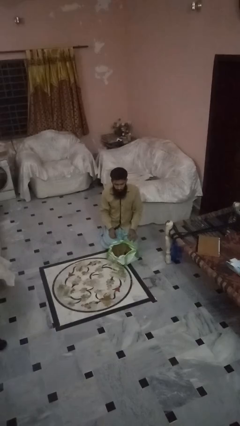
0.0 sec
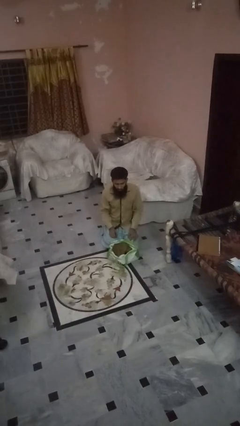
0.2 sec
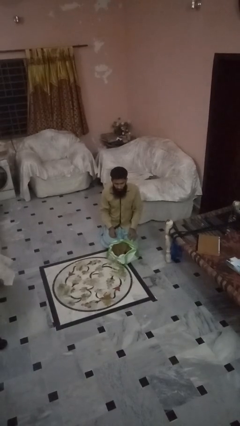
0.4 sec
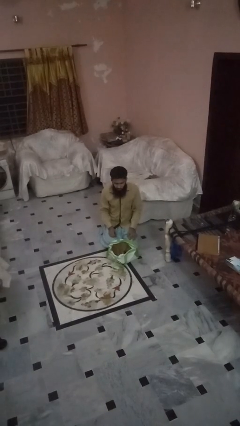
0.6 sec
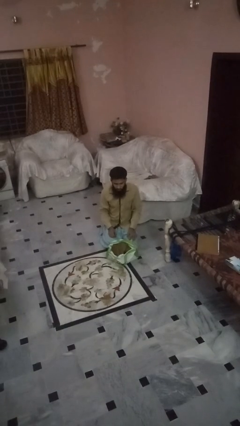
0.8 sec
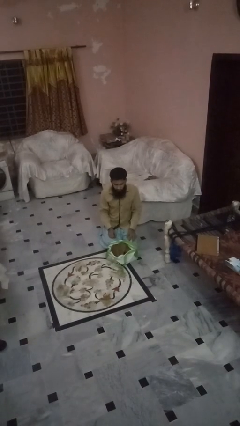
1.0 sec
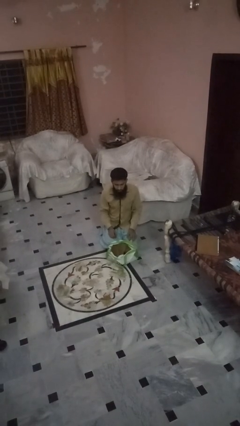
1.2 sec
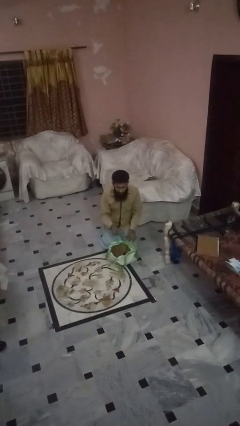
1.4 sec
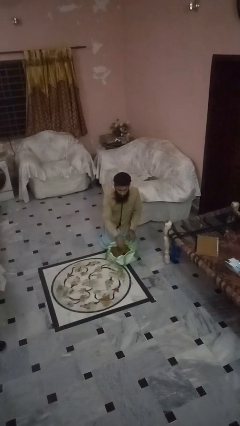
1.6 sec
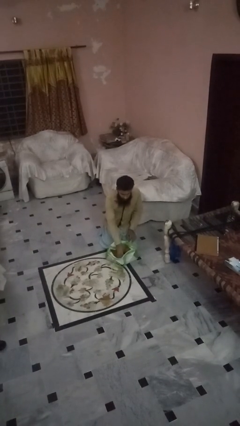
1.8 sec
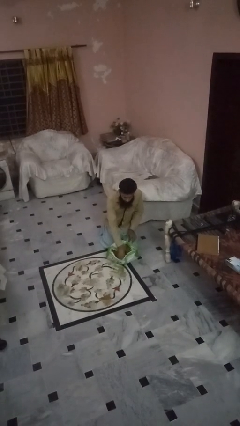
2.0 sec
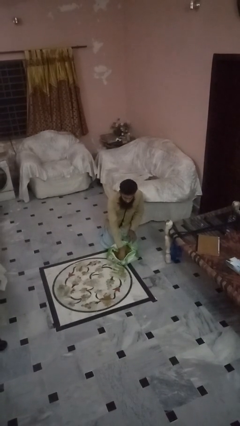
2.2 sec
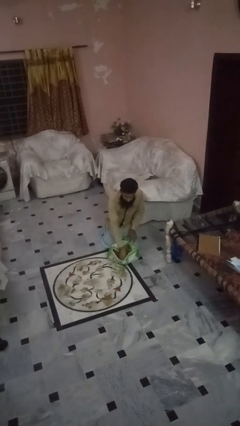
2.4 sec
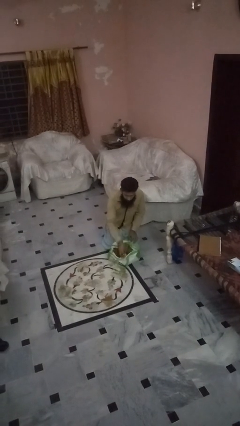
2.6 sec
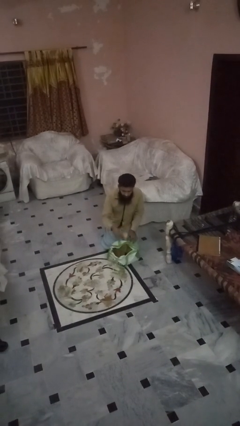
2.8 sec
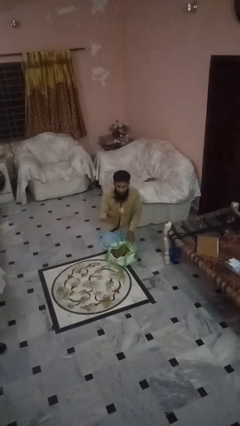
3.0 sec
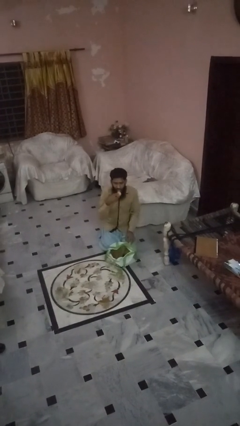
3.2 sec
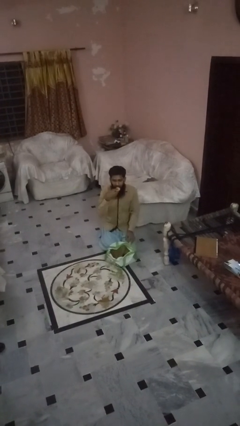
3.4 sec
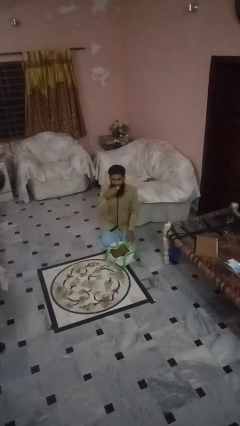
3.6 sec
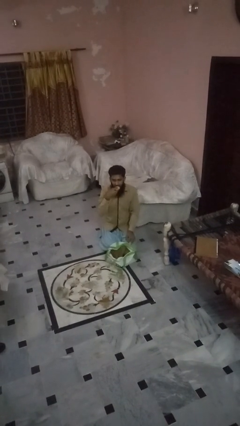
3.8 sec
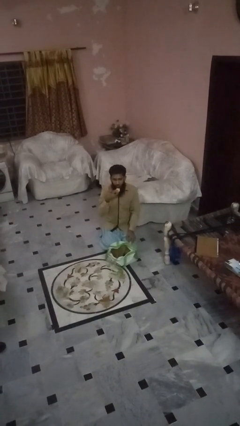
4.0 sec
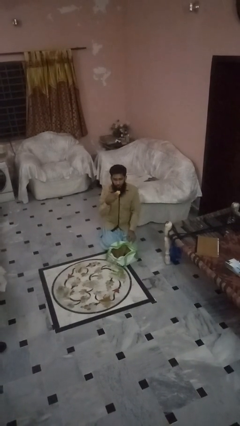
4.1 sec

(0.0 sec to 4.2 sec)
person eats snack from bag

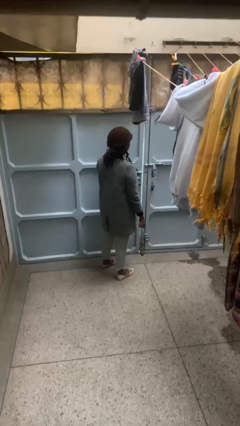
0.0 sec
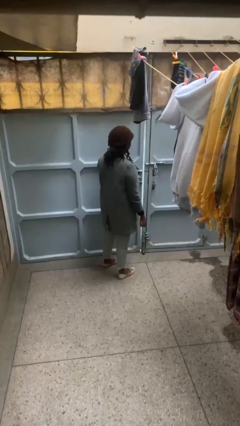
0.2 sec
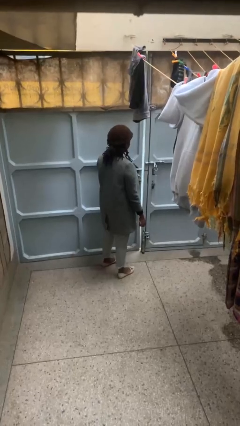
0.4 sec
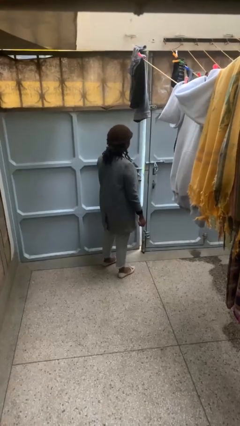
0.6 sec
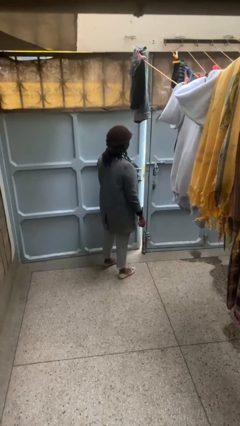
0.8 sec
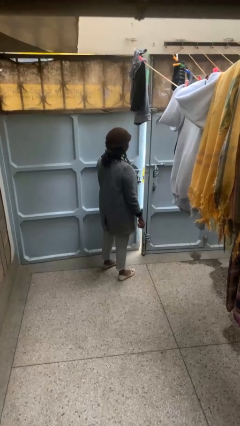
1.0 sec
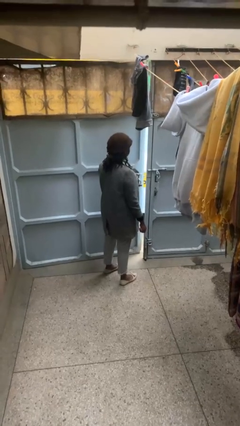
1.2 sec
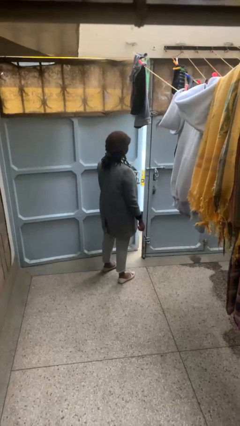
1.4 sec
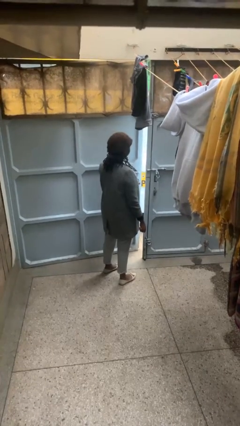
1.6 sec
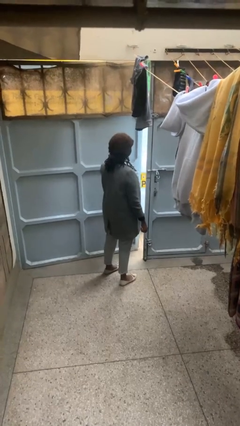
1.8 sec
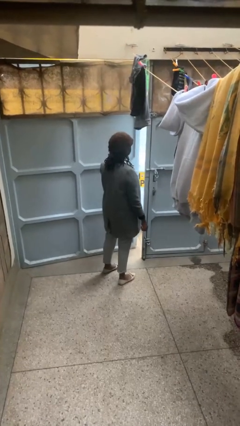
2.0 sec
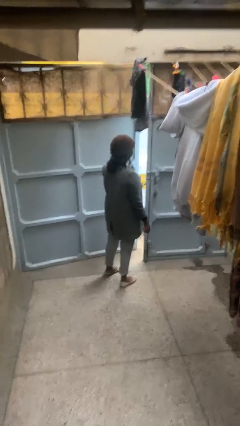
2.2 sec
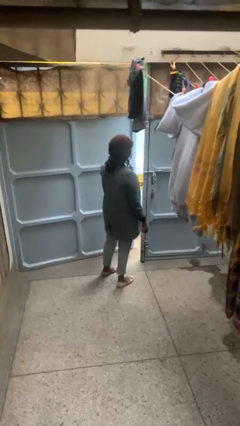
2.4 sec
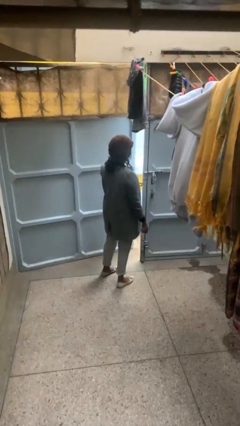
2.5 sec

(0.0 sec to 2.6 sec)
person opens gate

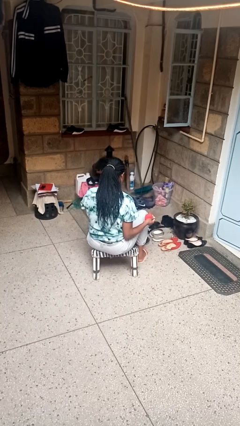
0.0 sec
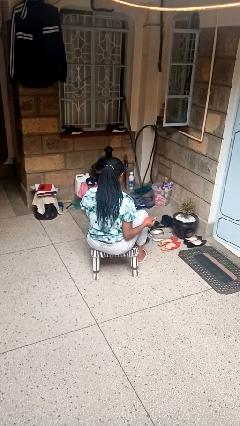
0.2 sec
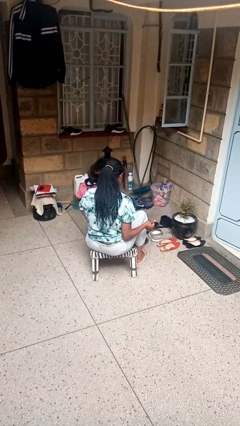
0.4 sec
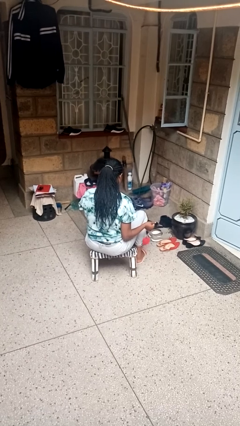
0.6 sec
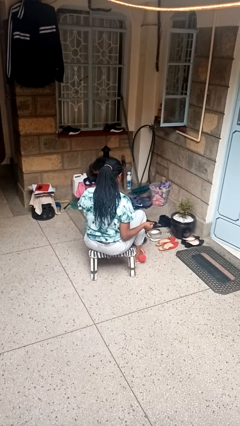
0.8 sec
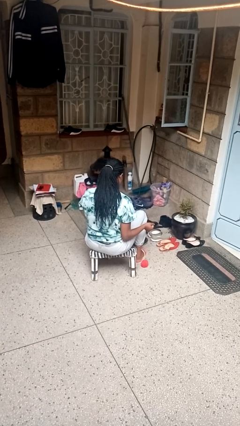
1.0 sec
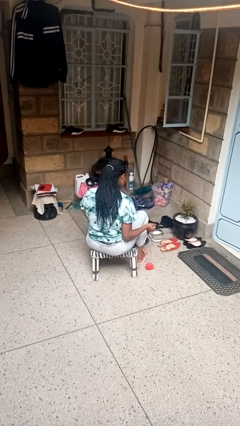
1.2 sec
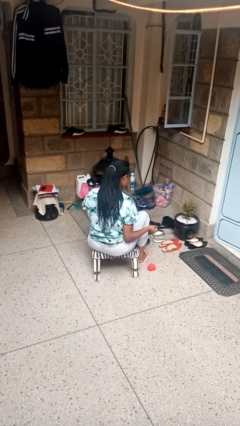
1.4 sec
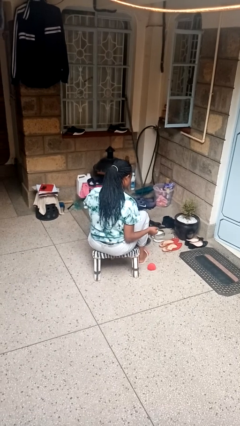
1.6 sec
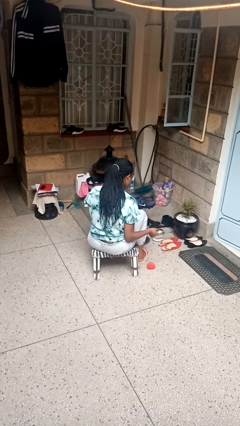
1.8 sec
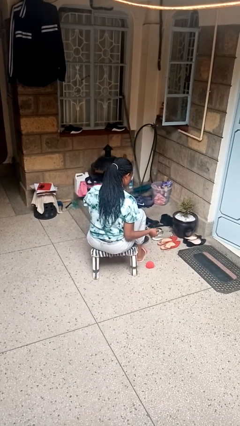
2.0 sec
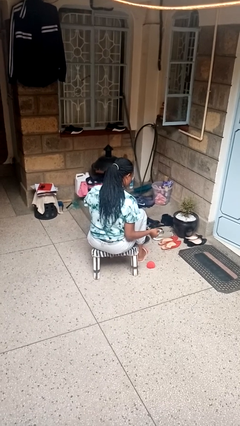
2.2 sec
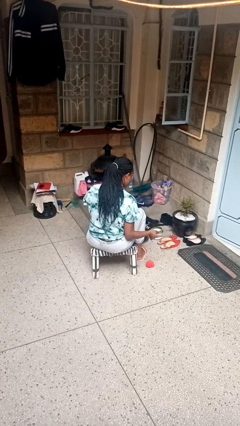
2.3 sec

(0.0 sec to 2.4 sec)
person drops object

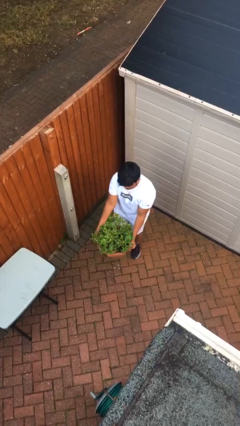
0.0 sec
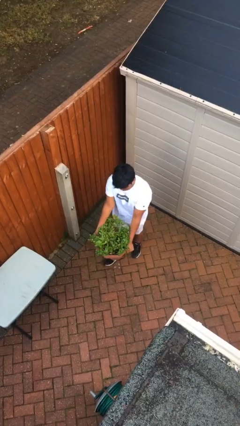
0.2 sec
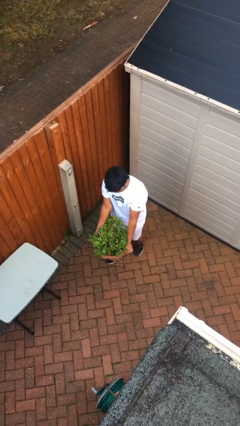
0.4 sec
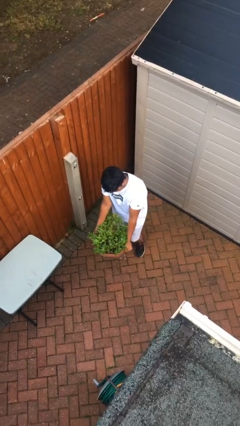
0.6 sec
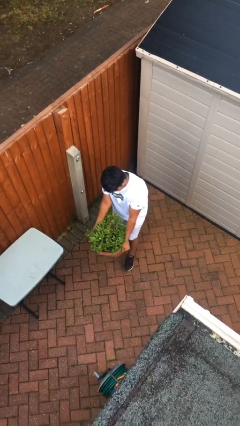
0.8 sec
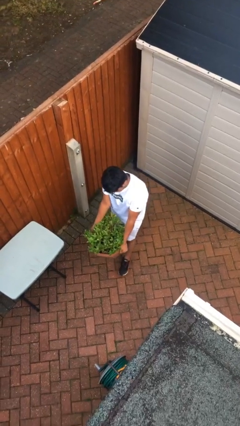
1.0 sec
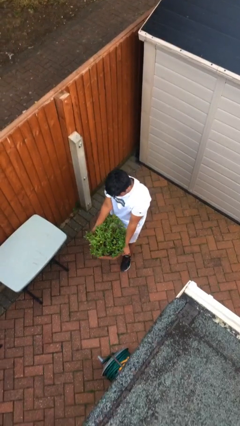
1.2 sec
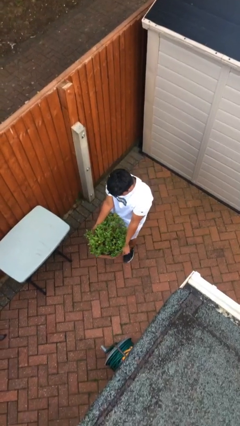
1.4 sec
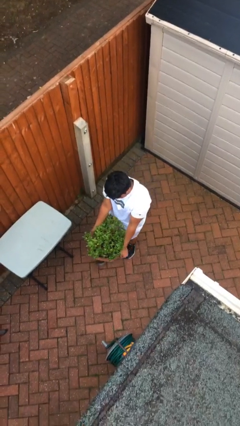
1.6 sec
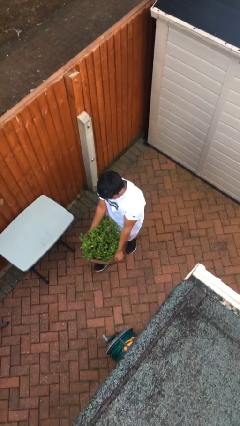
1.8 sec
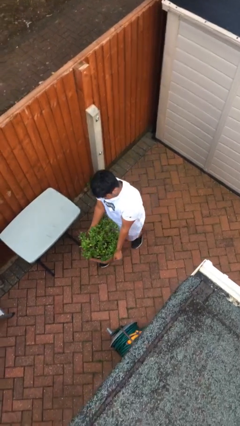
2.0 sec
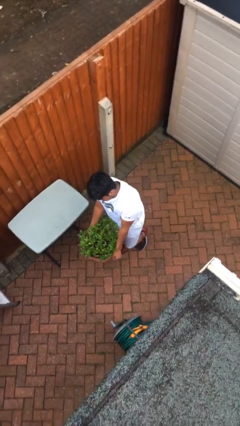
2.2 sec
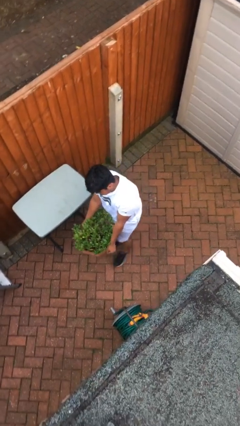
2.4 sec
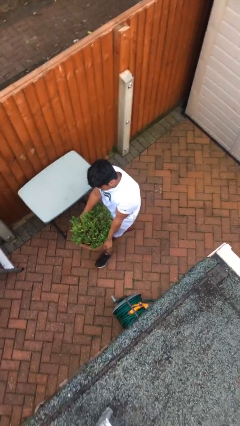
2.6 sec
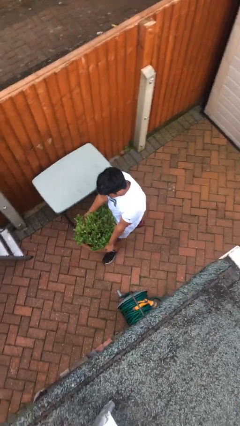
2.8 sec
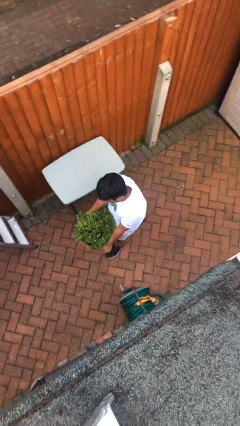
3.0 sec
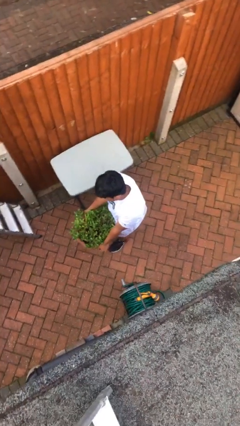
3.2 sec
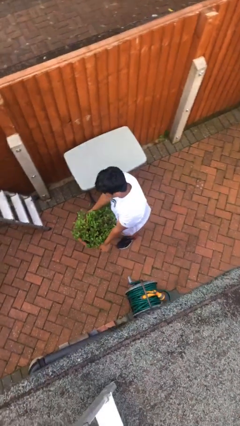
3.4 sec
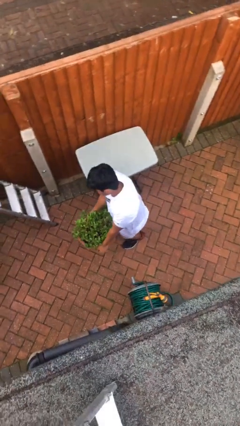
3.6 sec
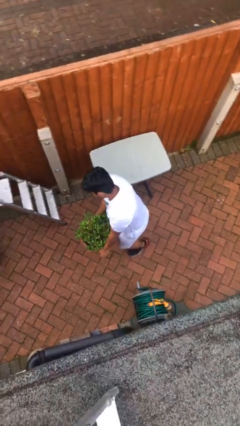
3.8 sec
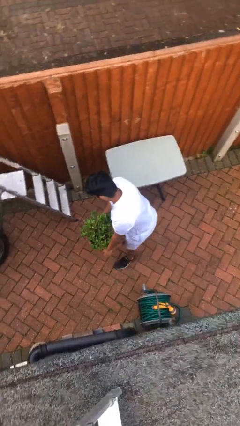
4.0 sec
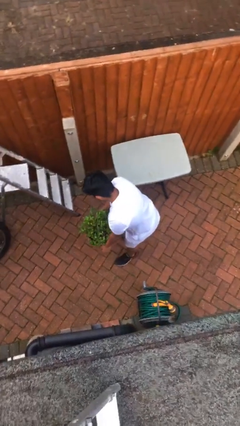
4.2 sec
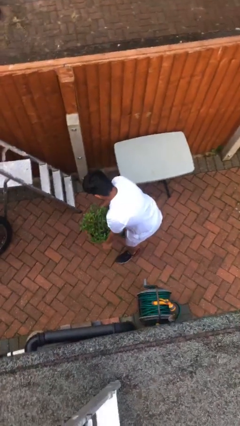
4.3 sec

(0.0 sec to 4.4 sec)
person carries heavy object

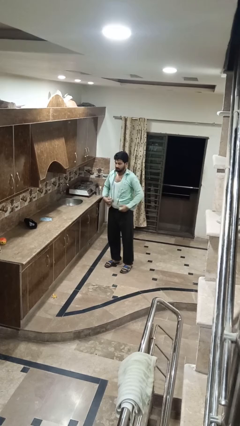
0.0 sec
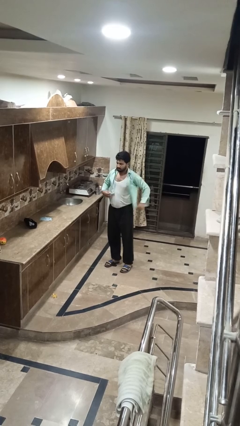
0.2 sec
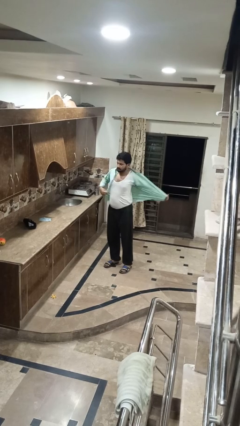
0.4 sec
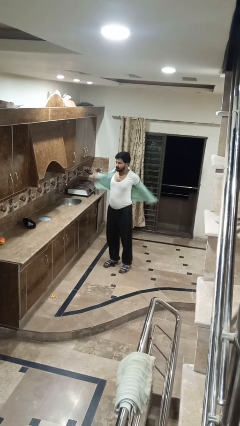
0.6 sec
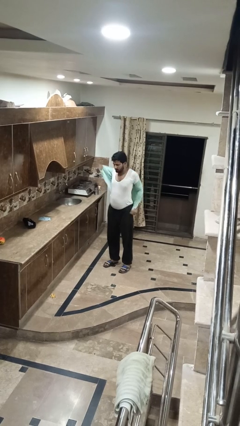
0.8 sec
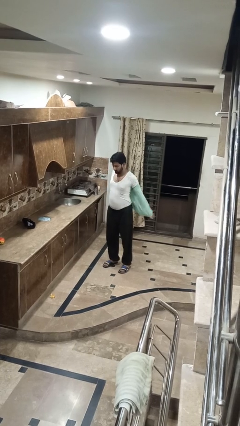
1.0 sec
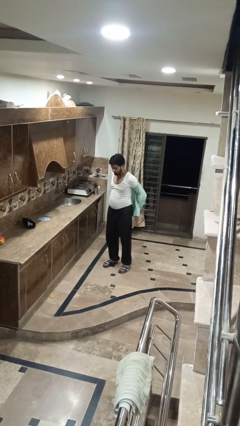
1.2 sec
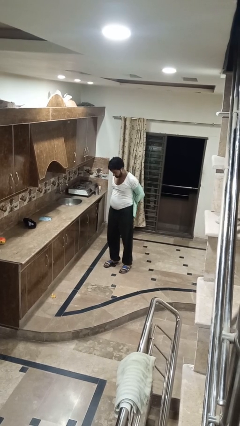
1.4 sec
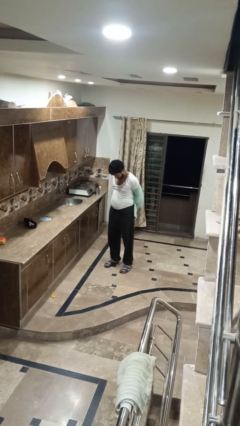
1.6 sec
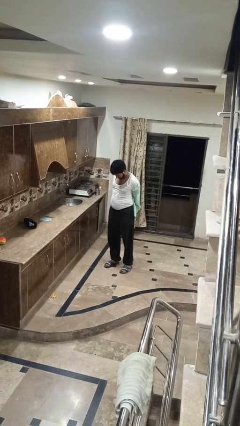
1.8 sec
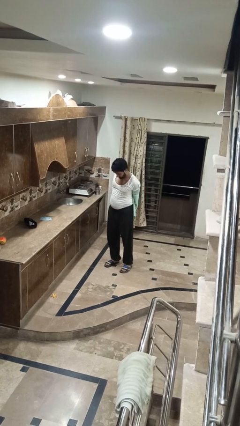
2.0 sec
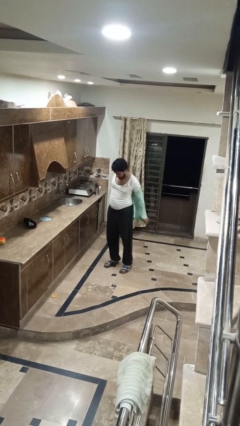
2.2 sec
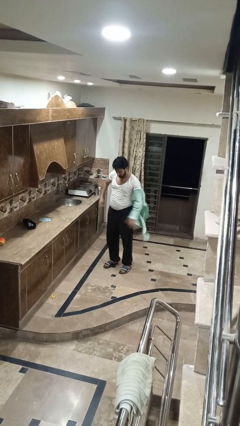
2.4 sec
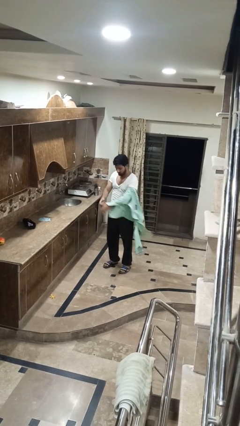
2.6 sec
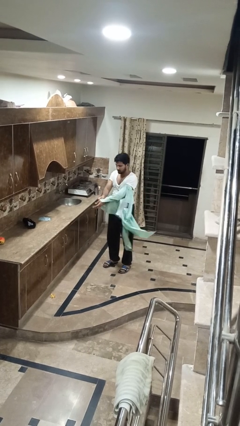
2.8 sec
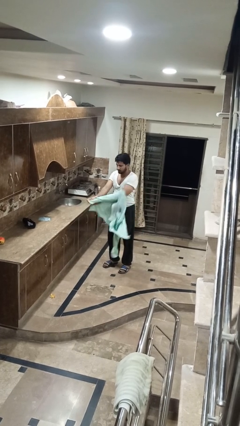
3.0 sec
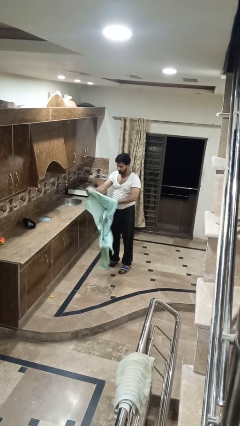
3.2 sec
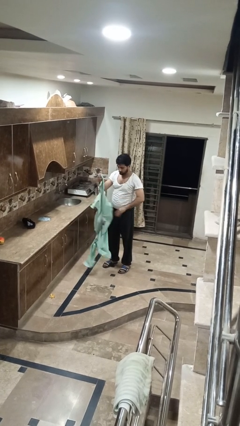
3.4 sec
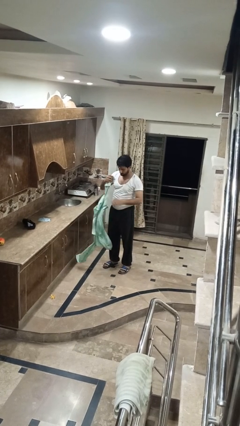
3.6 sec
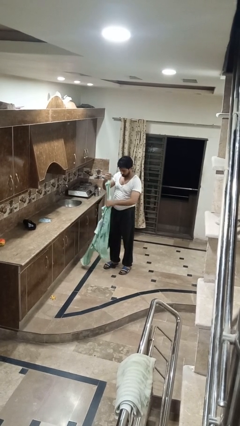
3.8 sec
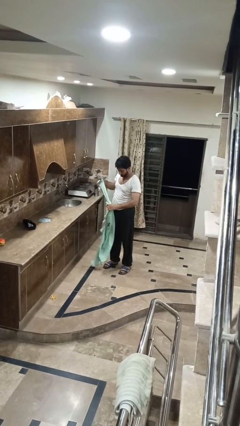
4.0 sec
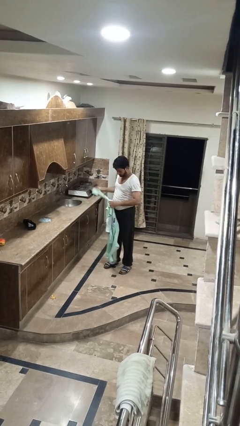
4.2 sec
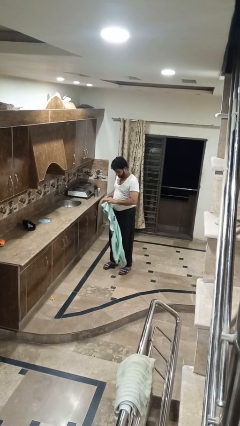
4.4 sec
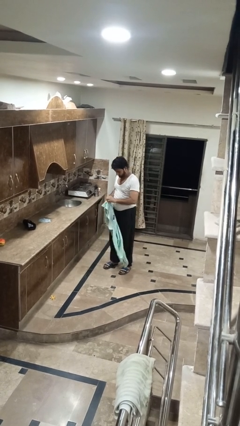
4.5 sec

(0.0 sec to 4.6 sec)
person takes off shirt
